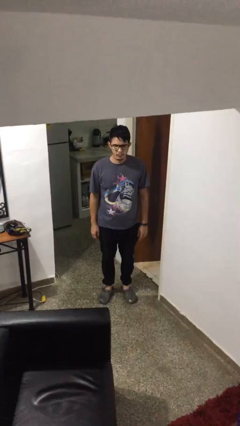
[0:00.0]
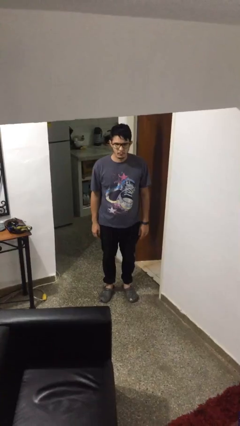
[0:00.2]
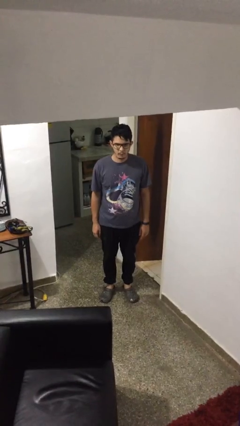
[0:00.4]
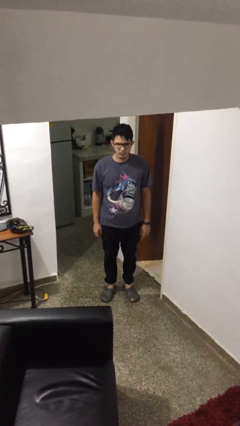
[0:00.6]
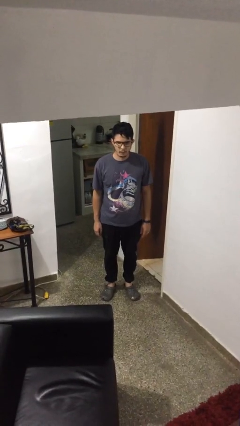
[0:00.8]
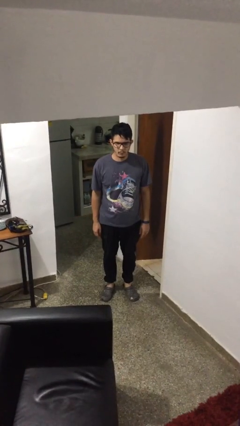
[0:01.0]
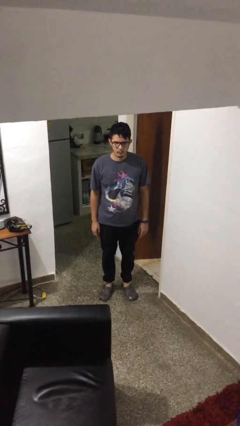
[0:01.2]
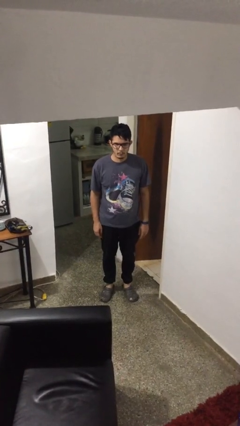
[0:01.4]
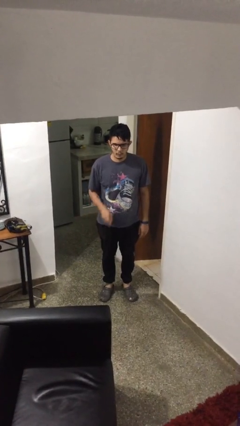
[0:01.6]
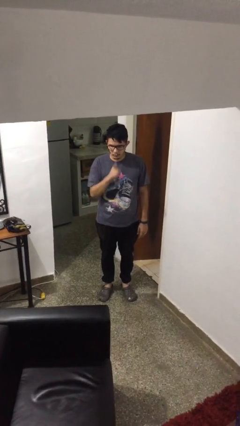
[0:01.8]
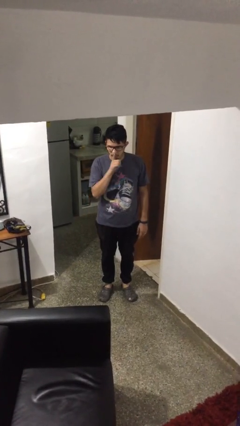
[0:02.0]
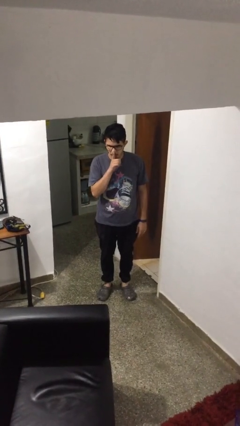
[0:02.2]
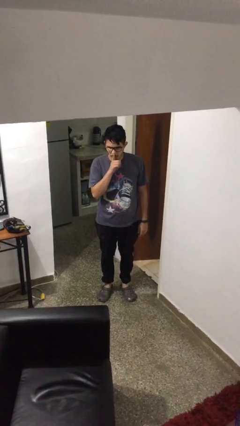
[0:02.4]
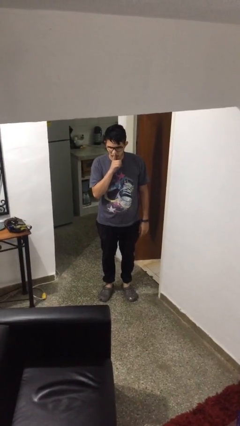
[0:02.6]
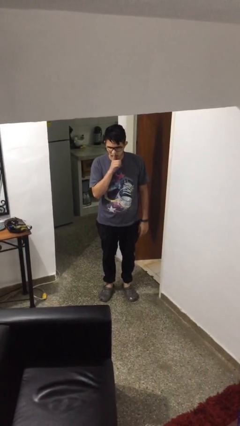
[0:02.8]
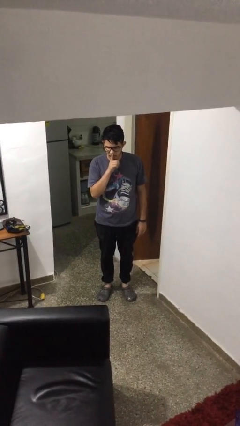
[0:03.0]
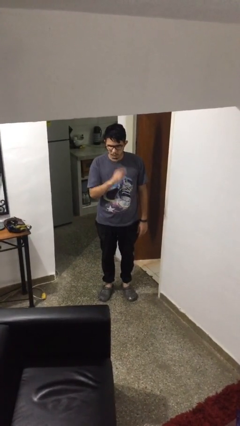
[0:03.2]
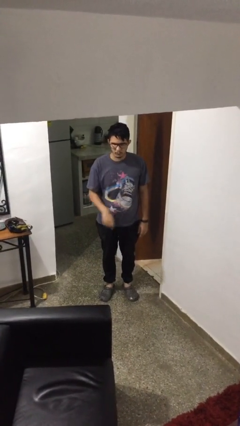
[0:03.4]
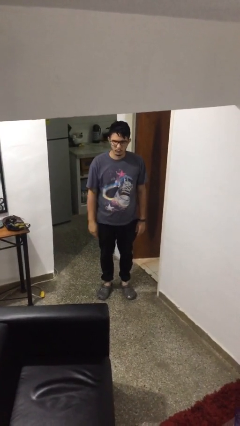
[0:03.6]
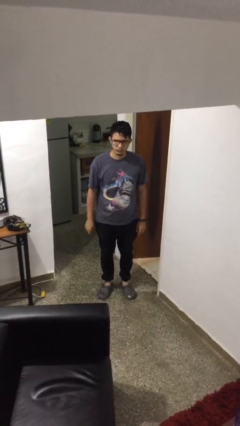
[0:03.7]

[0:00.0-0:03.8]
person gestures be quiet

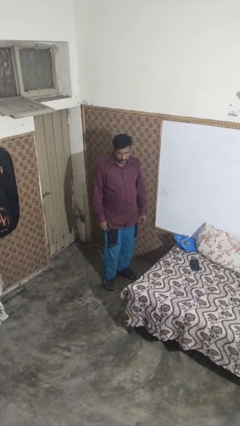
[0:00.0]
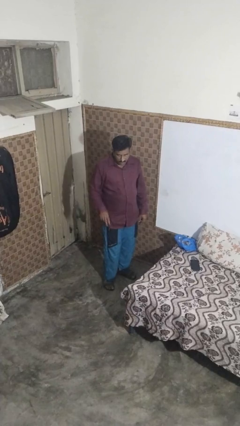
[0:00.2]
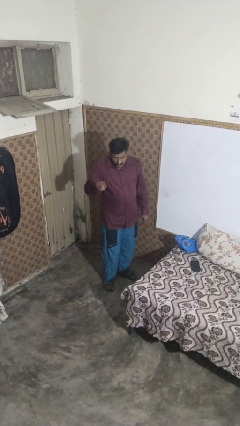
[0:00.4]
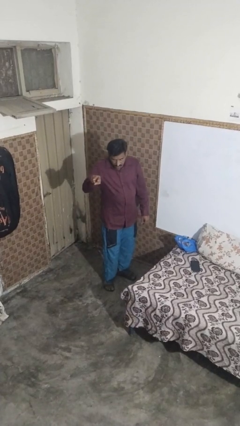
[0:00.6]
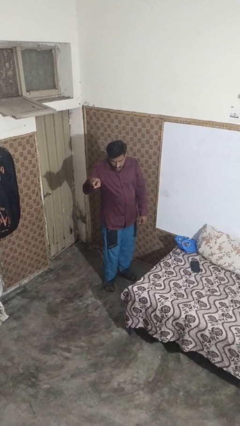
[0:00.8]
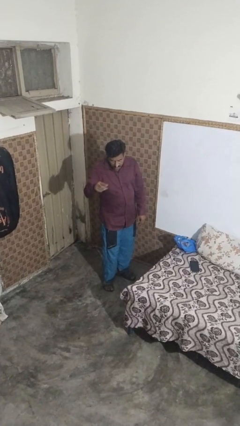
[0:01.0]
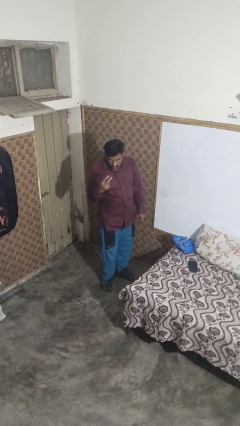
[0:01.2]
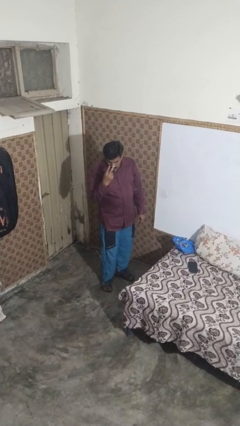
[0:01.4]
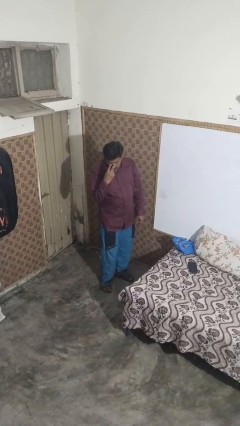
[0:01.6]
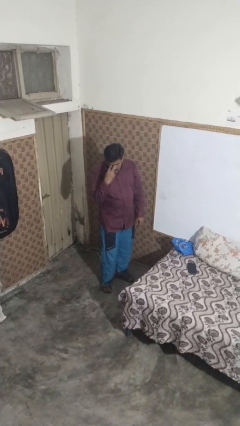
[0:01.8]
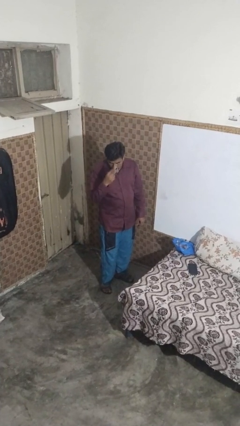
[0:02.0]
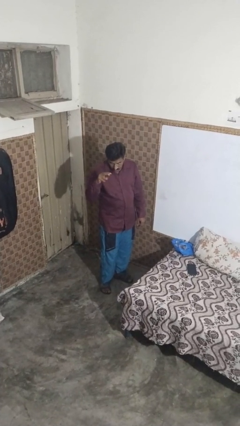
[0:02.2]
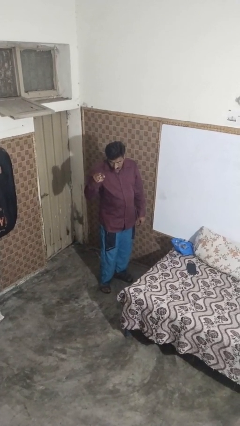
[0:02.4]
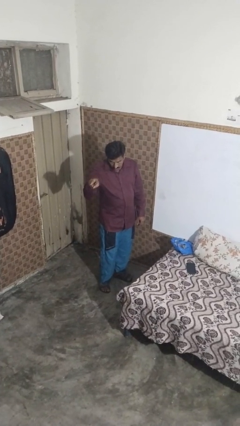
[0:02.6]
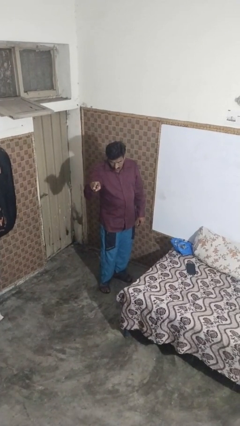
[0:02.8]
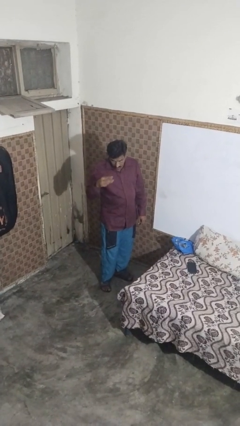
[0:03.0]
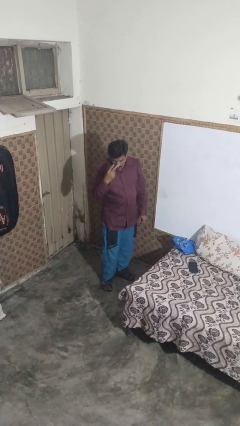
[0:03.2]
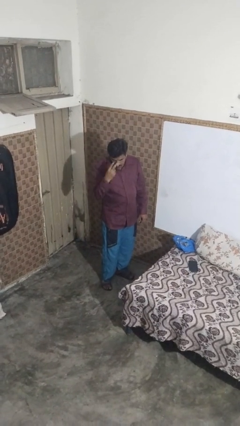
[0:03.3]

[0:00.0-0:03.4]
person gestures watch closely

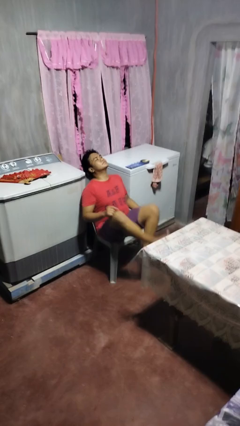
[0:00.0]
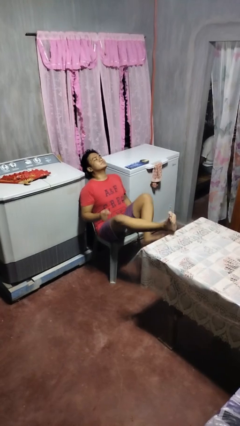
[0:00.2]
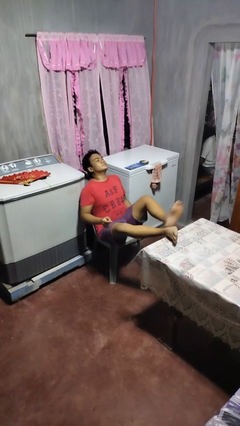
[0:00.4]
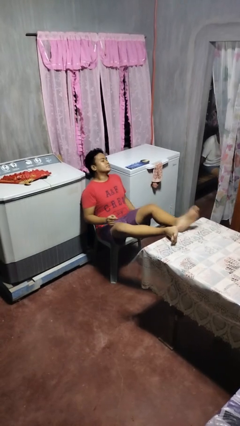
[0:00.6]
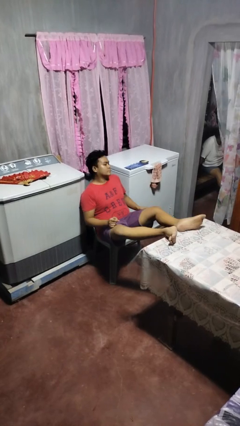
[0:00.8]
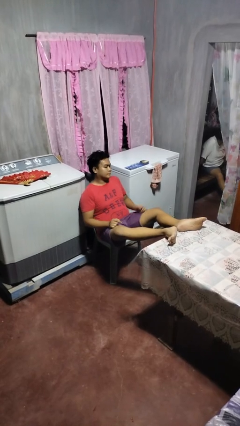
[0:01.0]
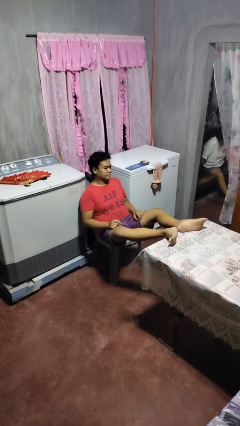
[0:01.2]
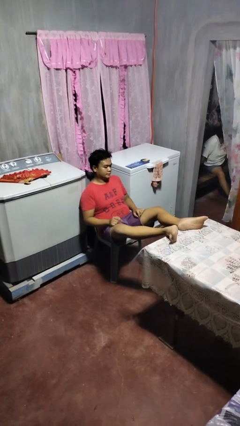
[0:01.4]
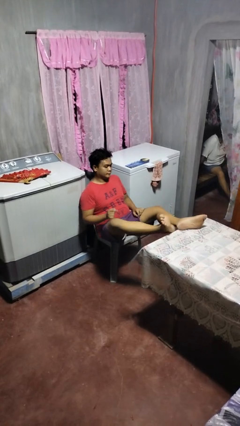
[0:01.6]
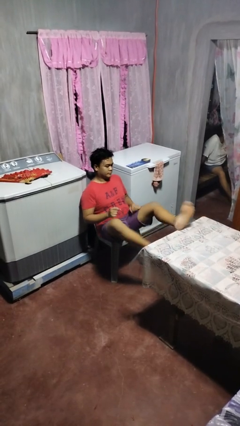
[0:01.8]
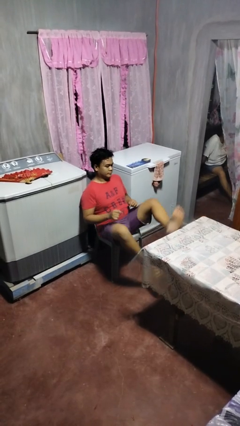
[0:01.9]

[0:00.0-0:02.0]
person puts feet up

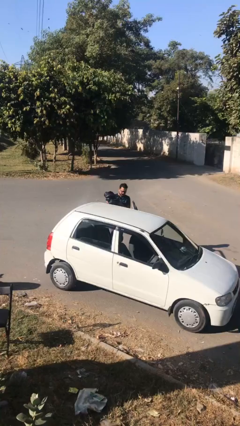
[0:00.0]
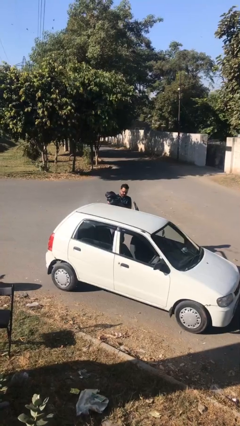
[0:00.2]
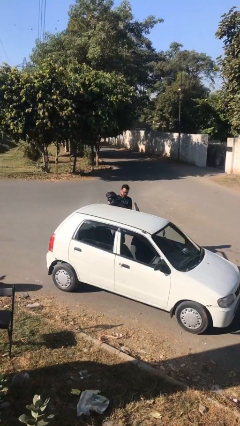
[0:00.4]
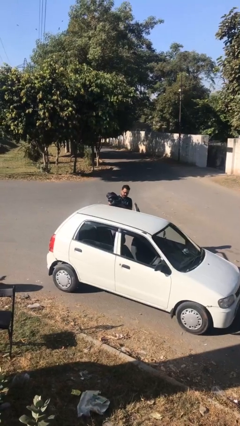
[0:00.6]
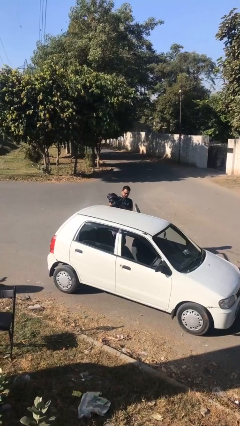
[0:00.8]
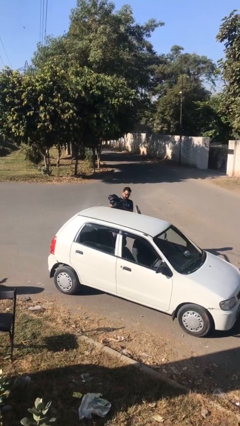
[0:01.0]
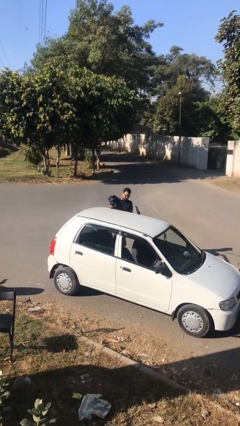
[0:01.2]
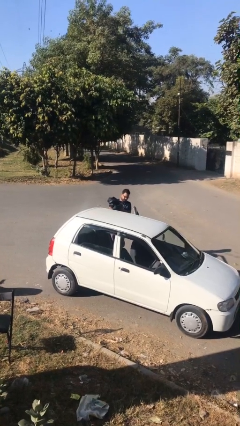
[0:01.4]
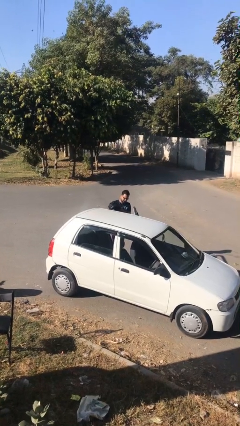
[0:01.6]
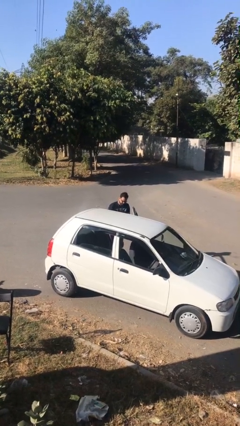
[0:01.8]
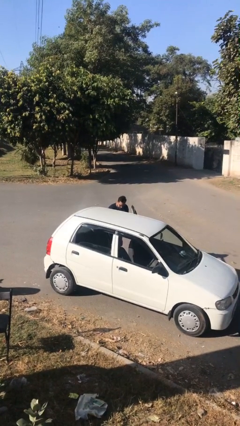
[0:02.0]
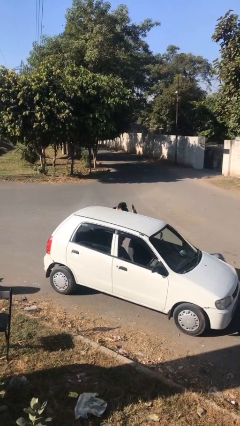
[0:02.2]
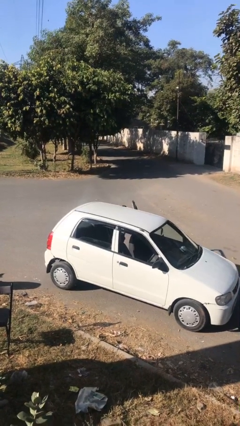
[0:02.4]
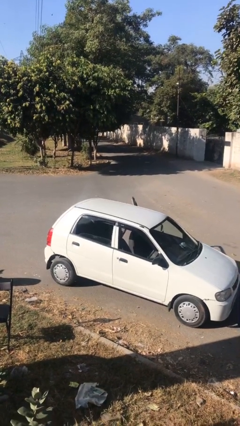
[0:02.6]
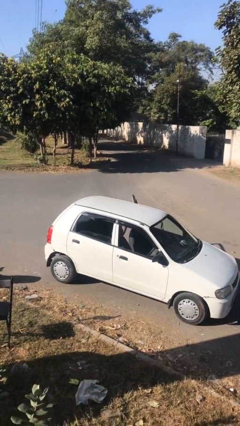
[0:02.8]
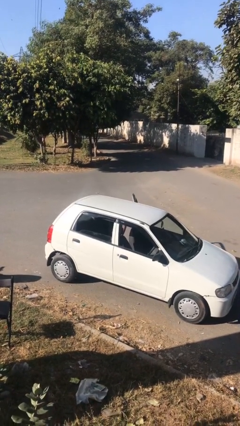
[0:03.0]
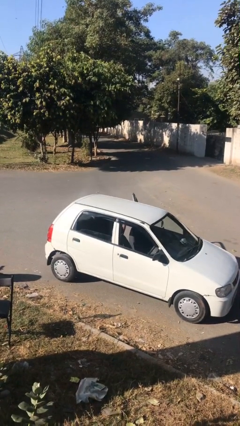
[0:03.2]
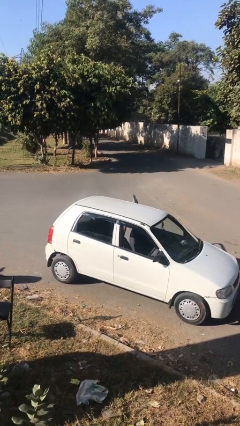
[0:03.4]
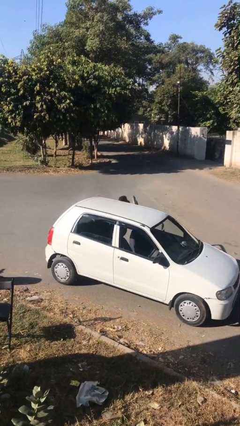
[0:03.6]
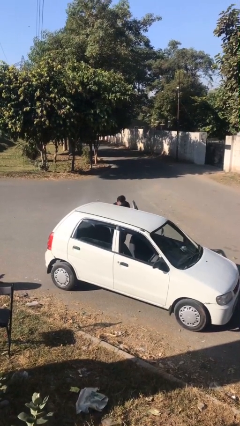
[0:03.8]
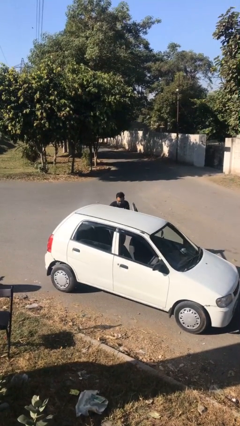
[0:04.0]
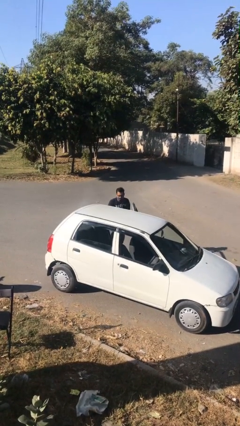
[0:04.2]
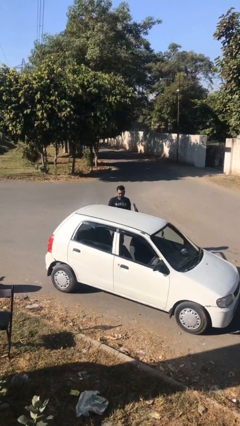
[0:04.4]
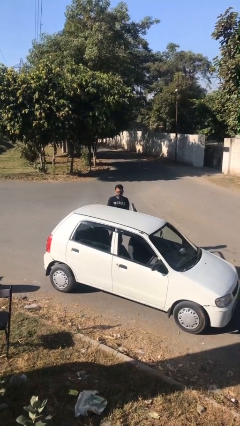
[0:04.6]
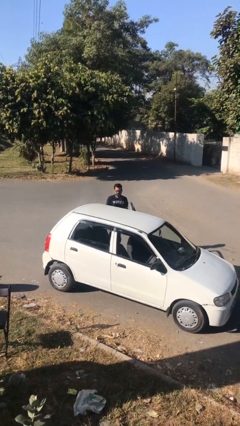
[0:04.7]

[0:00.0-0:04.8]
person loads car

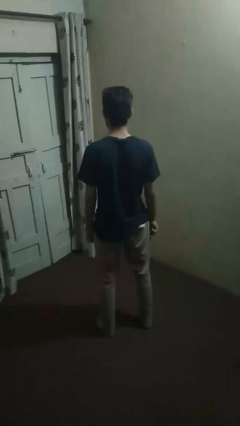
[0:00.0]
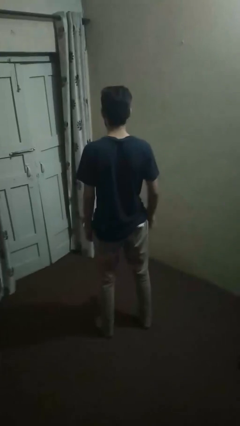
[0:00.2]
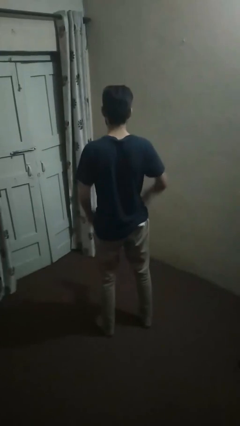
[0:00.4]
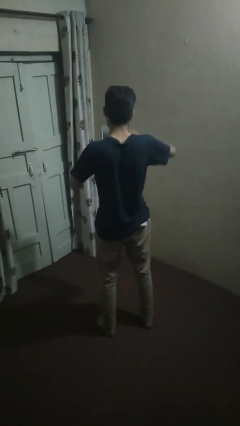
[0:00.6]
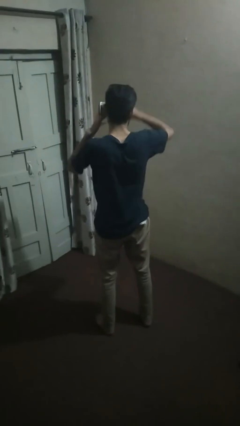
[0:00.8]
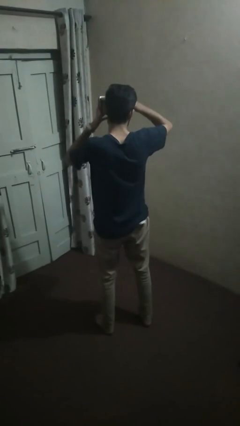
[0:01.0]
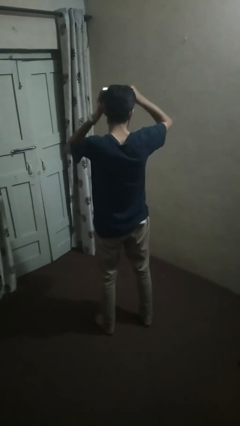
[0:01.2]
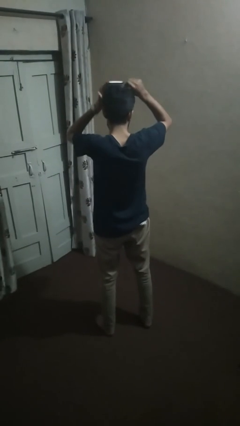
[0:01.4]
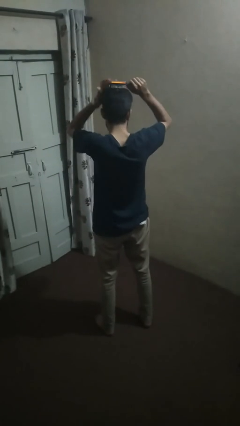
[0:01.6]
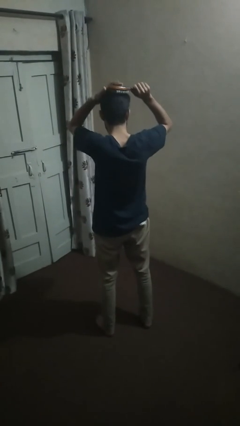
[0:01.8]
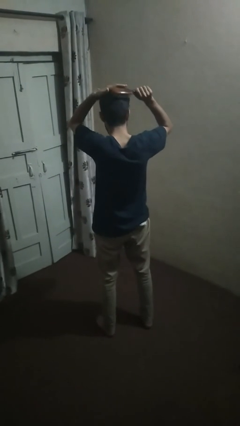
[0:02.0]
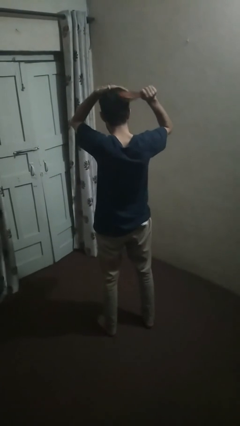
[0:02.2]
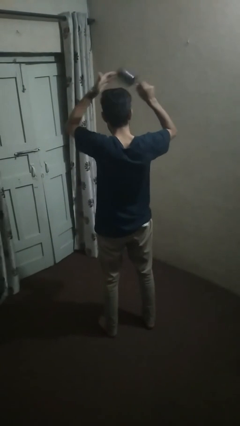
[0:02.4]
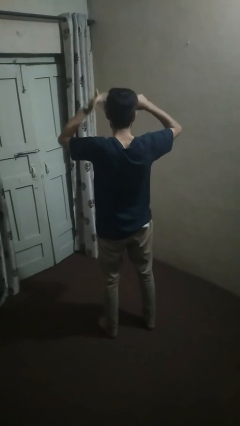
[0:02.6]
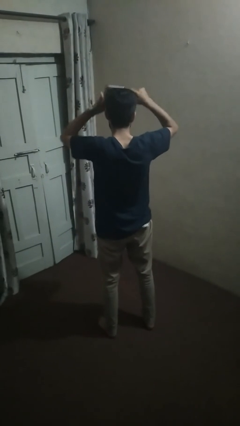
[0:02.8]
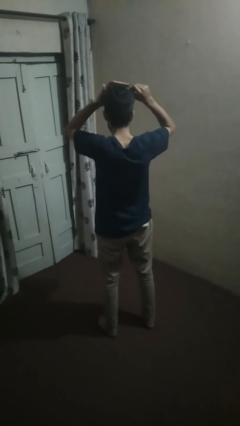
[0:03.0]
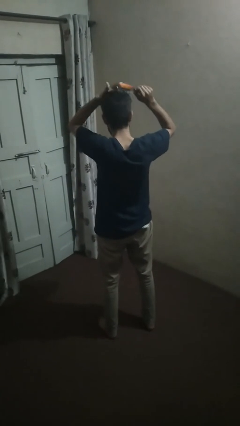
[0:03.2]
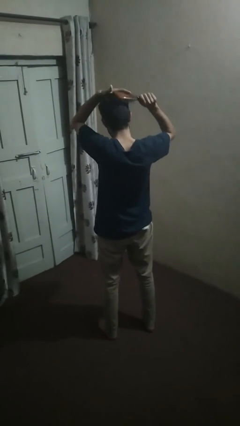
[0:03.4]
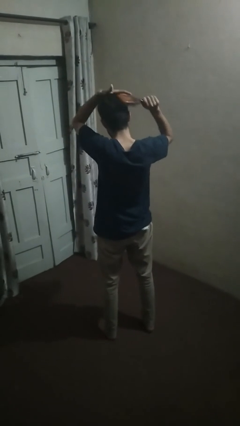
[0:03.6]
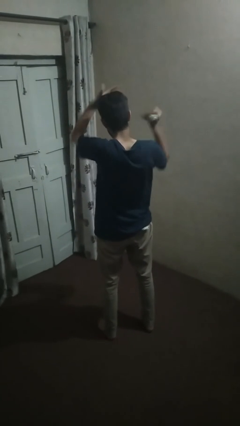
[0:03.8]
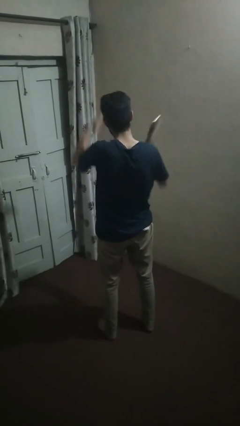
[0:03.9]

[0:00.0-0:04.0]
person brushes hair
